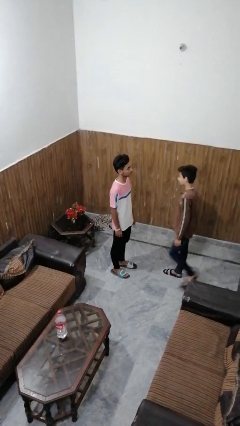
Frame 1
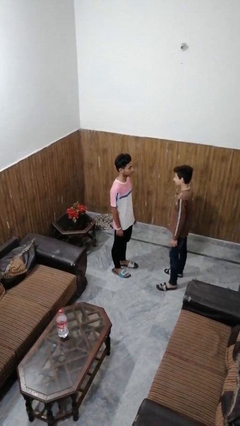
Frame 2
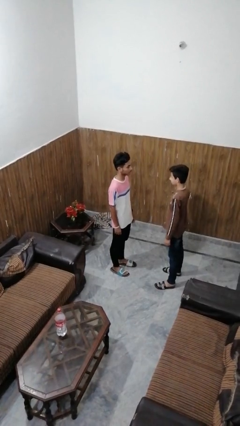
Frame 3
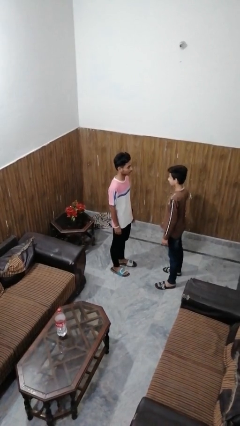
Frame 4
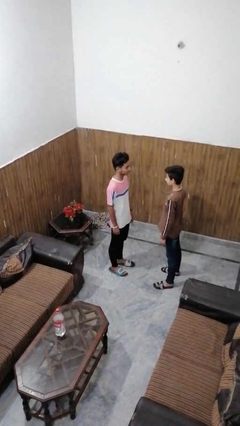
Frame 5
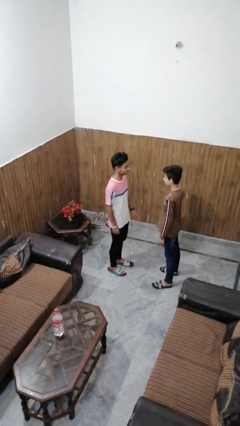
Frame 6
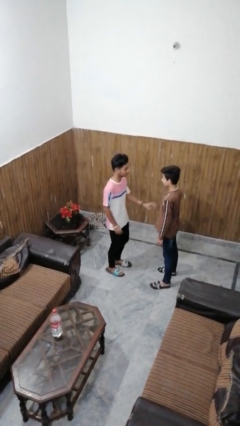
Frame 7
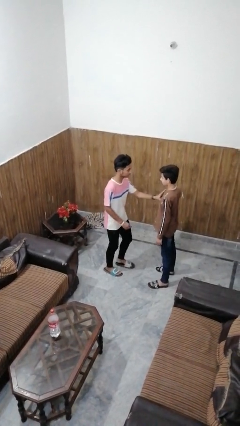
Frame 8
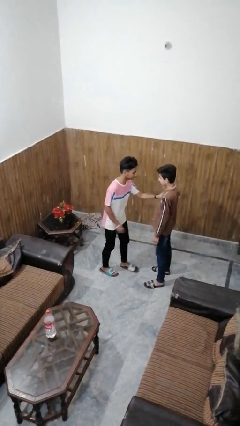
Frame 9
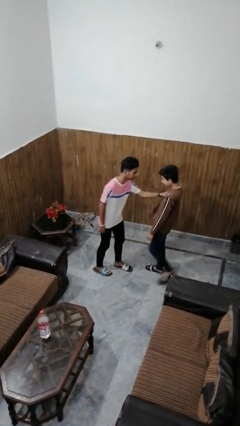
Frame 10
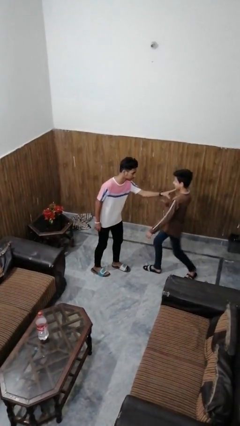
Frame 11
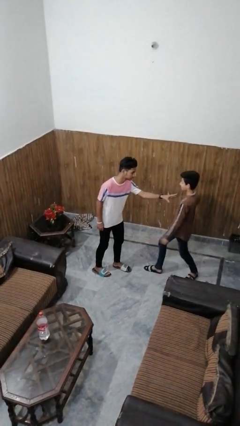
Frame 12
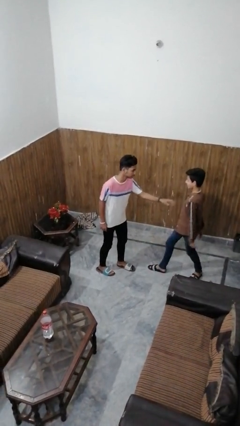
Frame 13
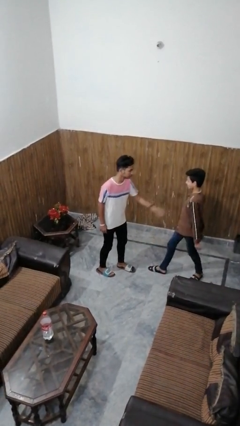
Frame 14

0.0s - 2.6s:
person shoves person

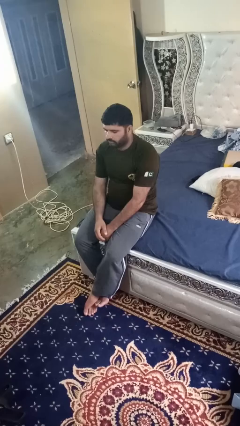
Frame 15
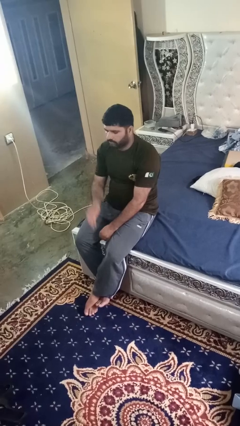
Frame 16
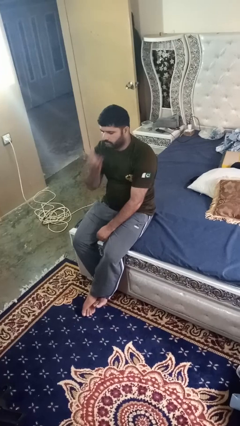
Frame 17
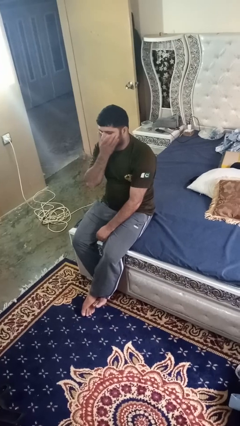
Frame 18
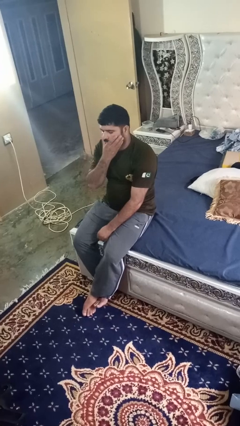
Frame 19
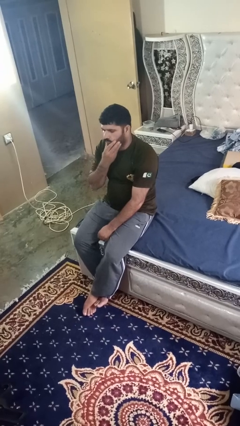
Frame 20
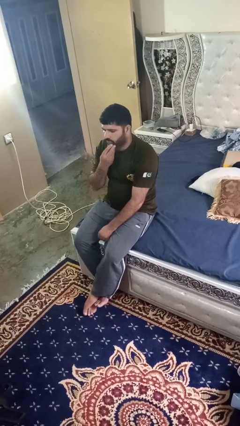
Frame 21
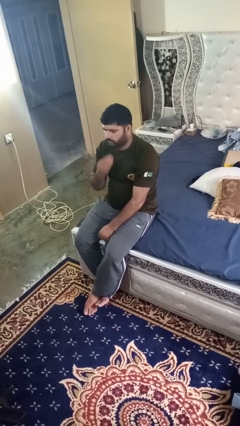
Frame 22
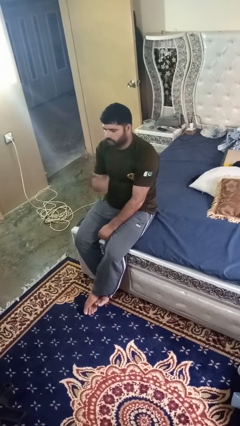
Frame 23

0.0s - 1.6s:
person strokes chin

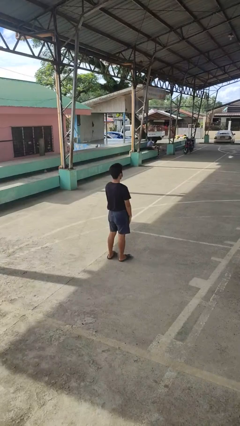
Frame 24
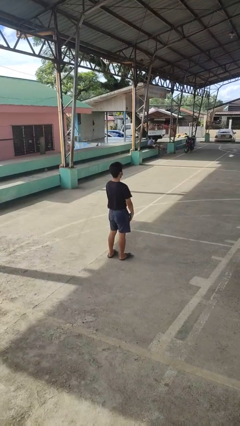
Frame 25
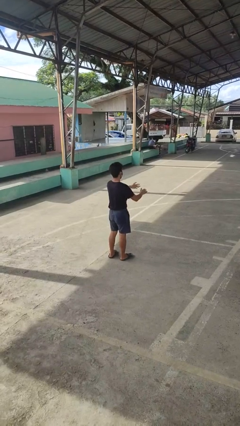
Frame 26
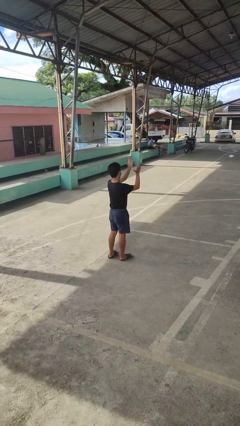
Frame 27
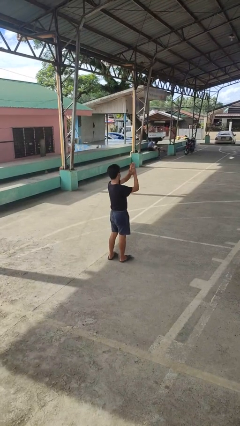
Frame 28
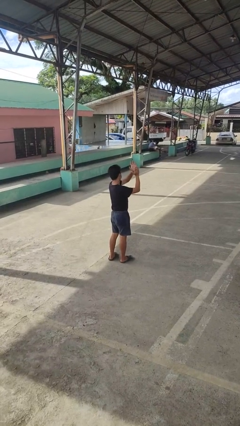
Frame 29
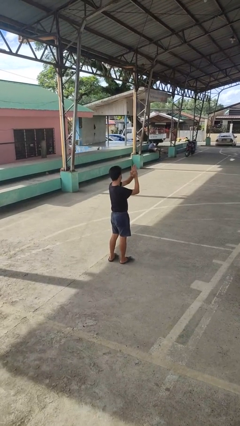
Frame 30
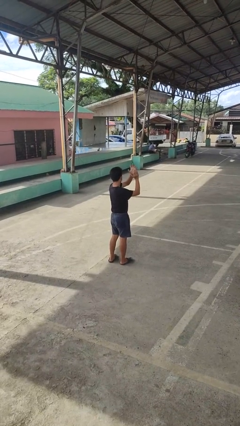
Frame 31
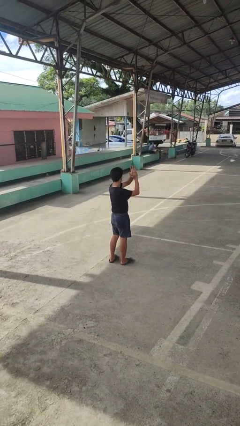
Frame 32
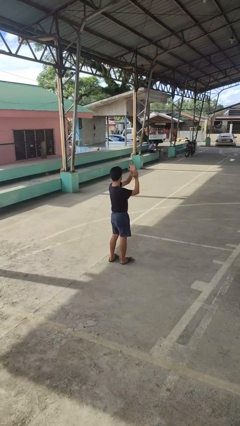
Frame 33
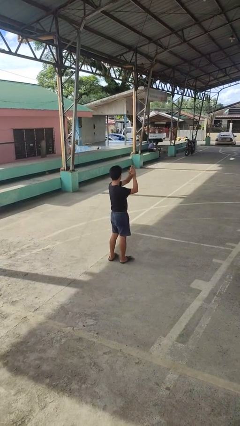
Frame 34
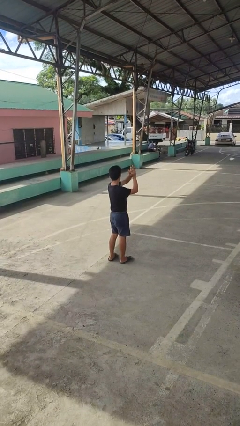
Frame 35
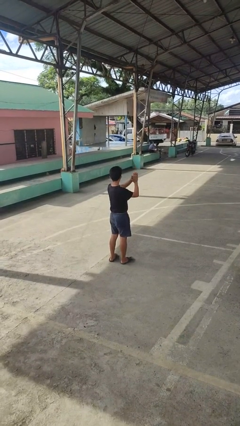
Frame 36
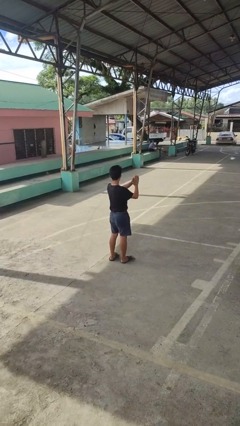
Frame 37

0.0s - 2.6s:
person claps hands

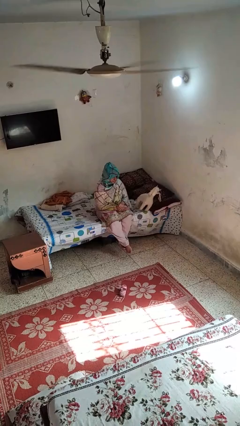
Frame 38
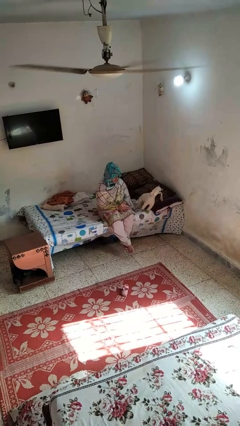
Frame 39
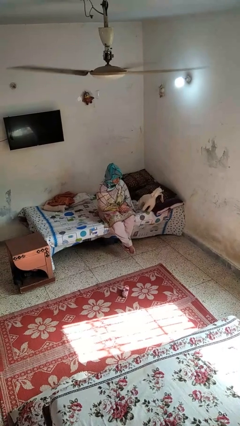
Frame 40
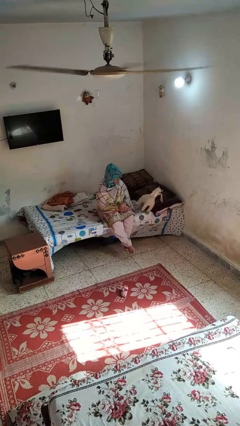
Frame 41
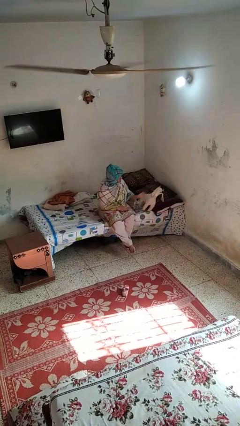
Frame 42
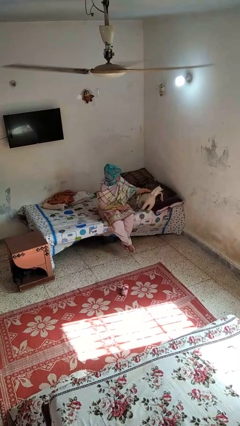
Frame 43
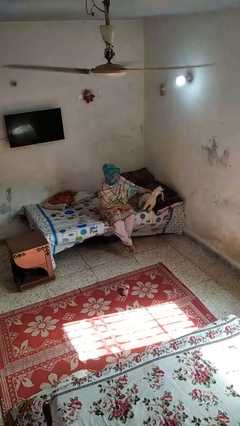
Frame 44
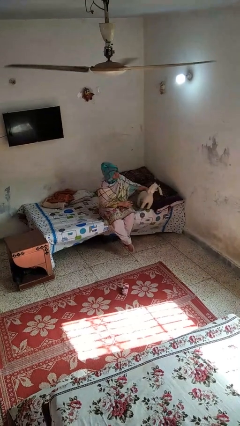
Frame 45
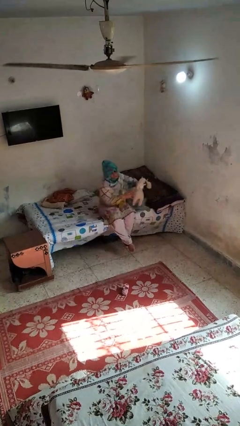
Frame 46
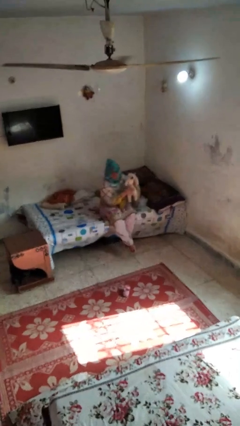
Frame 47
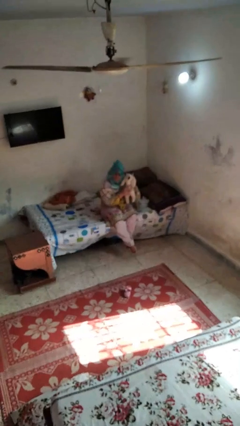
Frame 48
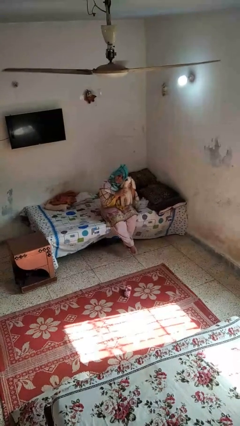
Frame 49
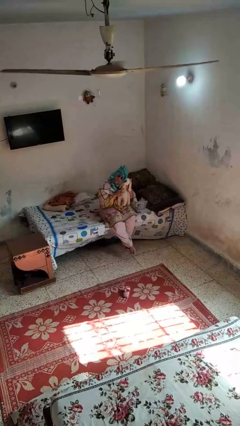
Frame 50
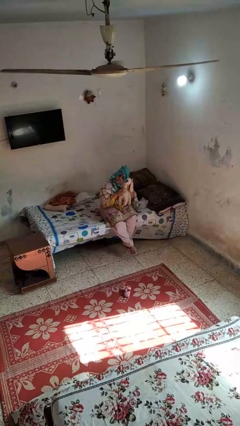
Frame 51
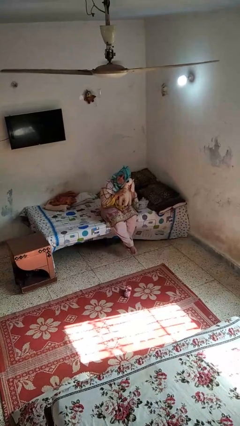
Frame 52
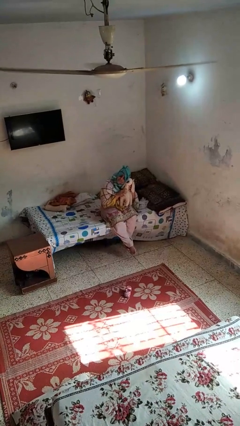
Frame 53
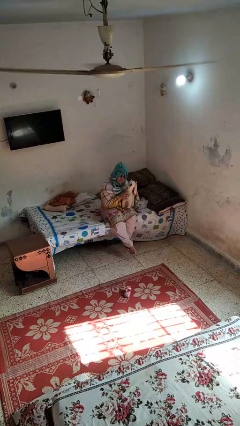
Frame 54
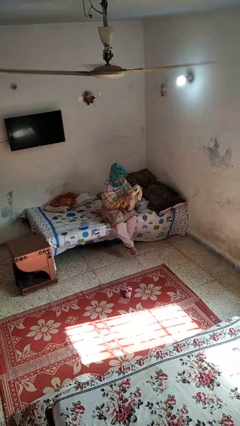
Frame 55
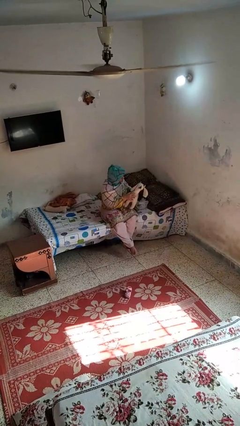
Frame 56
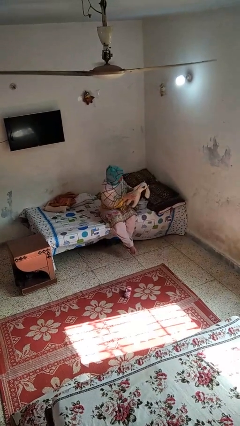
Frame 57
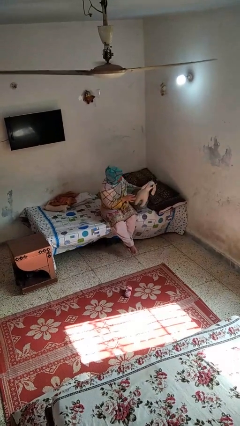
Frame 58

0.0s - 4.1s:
person hugs stuffed animal

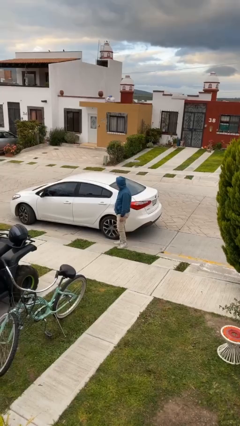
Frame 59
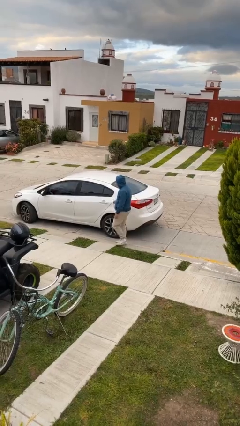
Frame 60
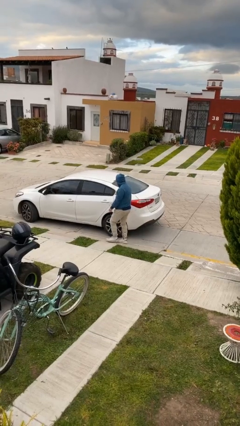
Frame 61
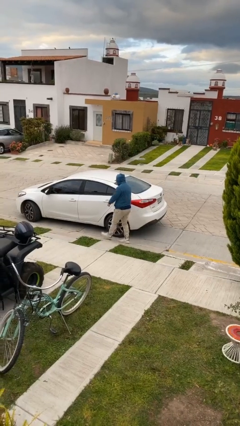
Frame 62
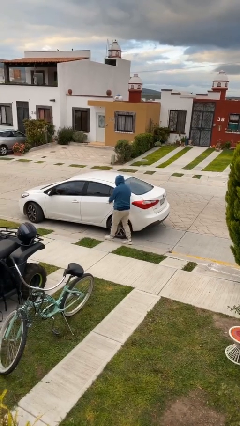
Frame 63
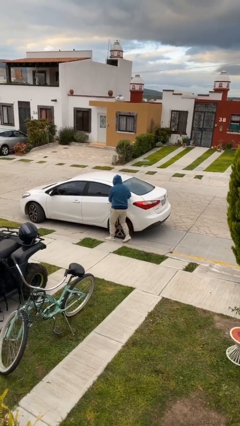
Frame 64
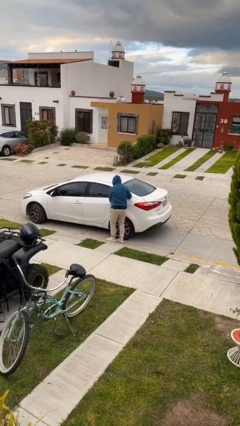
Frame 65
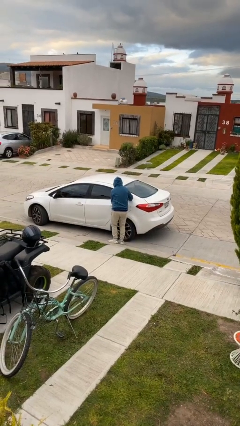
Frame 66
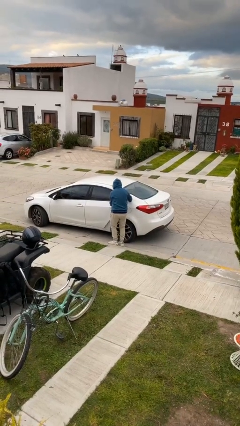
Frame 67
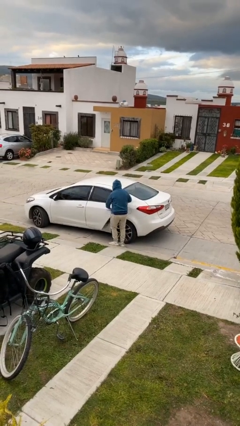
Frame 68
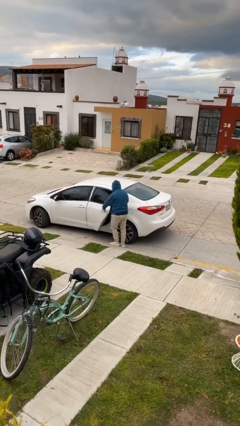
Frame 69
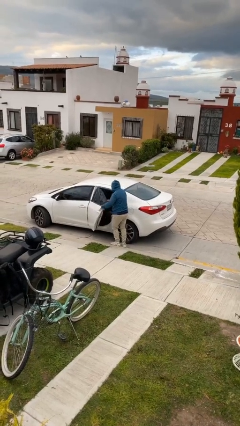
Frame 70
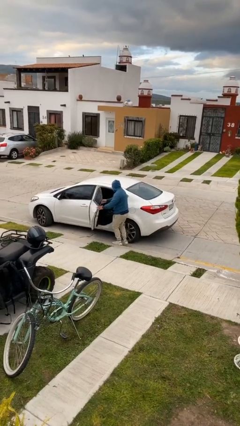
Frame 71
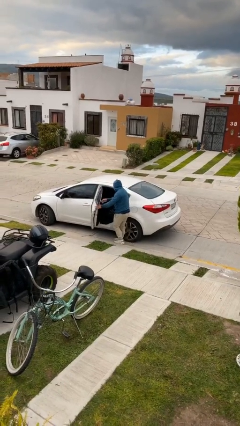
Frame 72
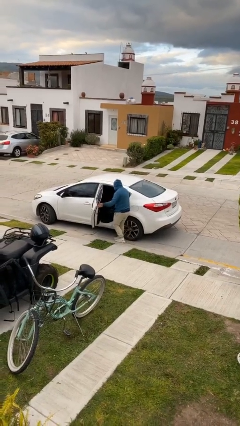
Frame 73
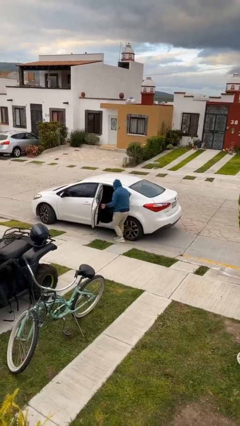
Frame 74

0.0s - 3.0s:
person opens car door

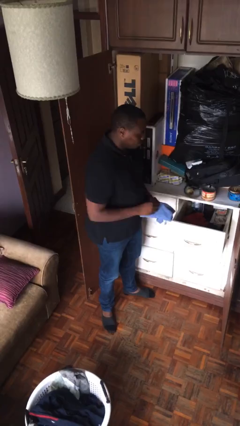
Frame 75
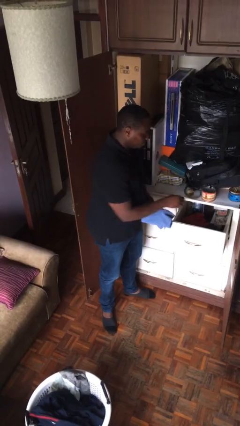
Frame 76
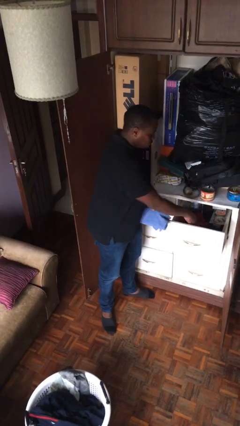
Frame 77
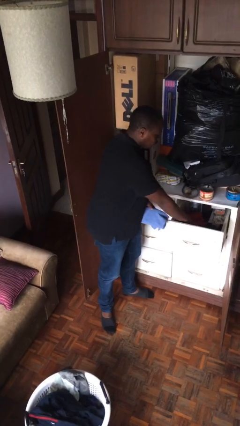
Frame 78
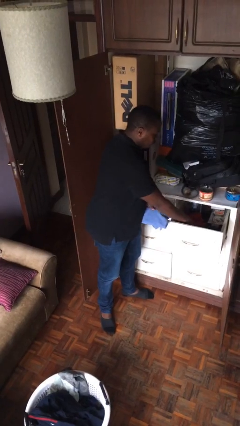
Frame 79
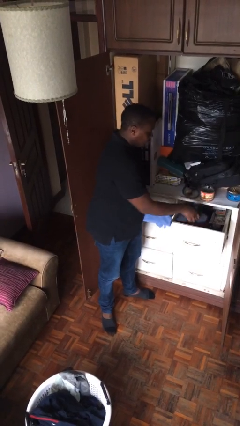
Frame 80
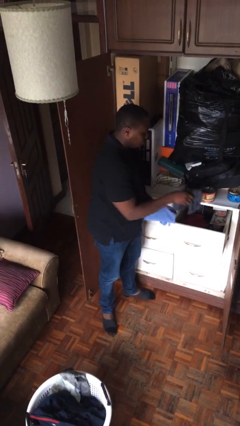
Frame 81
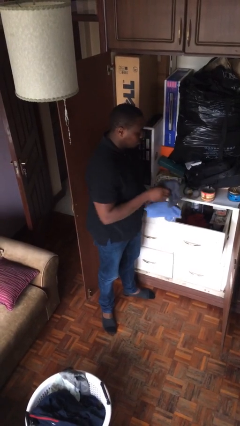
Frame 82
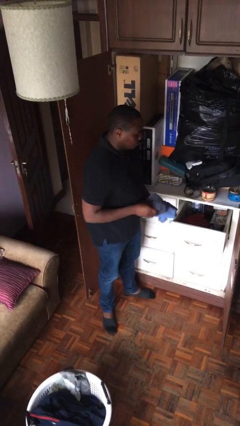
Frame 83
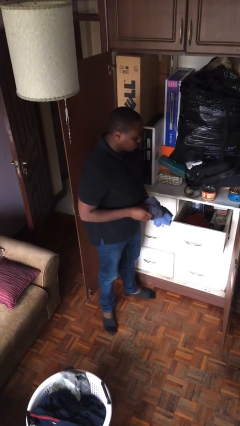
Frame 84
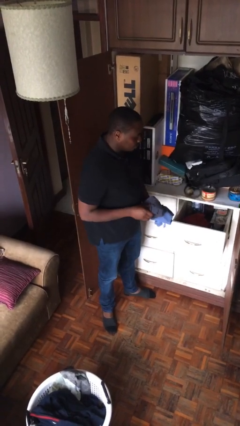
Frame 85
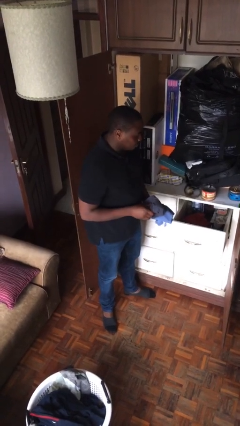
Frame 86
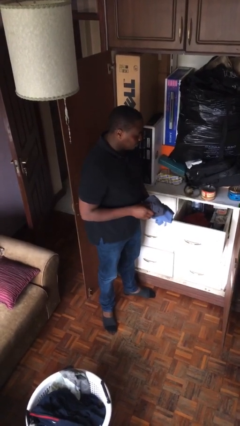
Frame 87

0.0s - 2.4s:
person takes clothes from dresser

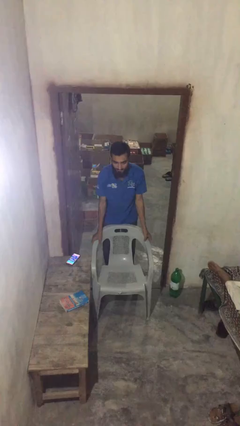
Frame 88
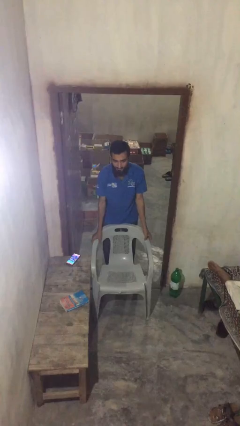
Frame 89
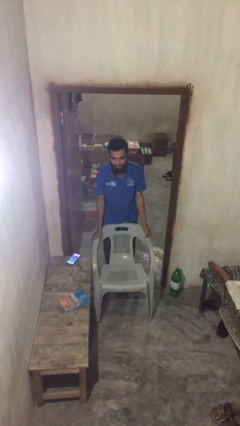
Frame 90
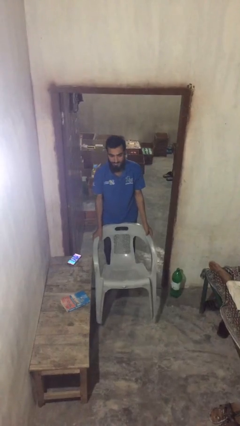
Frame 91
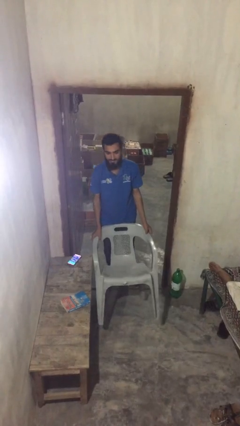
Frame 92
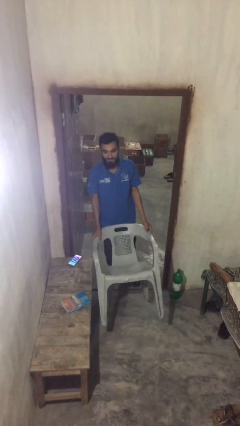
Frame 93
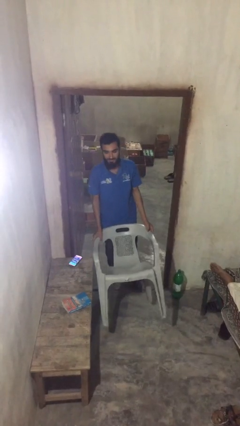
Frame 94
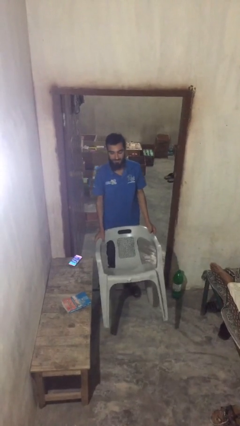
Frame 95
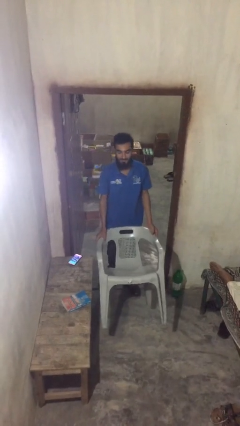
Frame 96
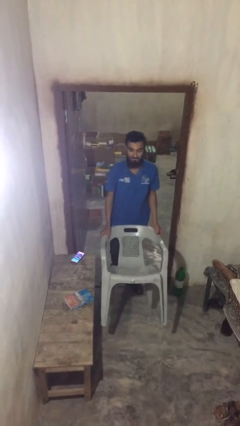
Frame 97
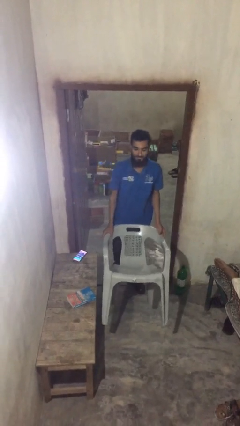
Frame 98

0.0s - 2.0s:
person picks up object from floor
